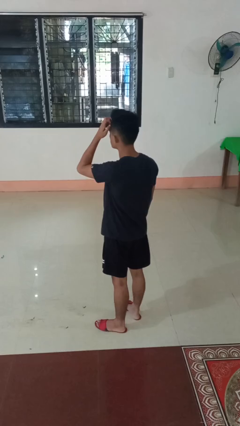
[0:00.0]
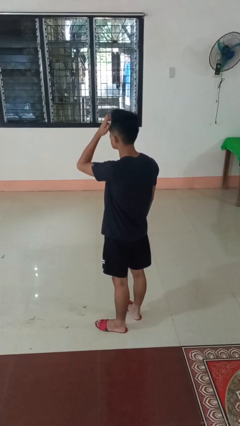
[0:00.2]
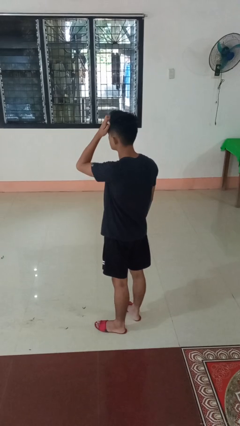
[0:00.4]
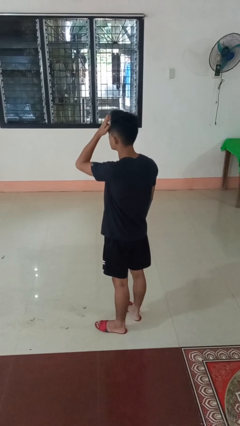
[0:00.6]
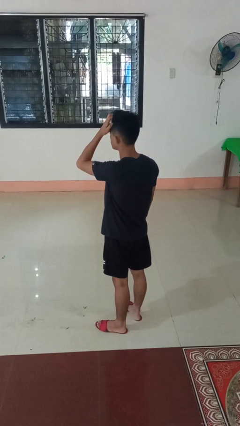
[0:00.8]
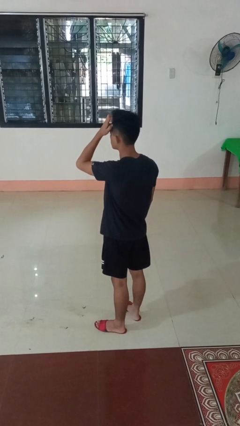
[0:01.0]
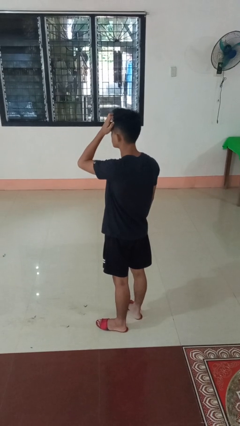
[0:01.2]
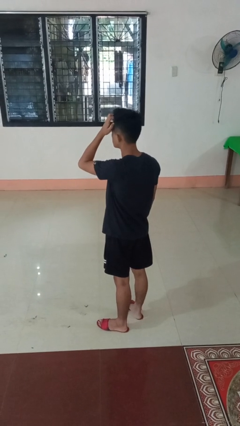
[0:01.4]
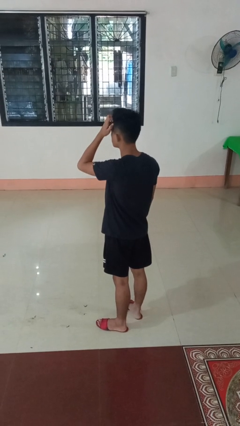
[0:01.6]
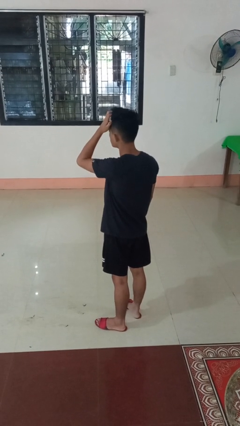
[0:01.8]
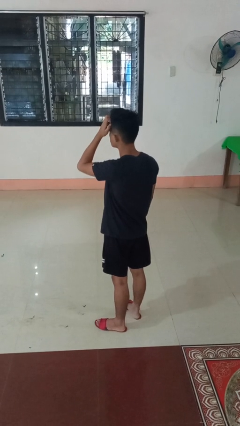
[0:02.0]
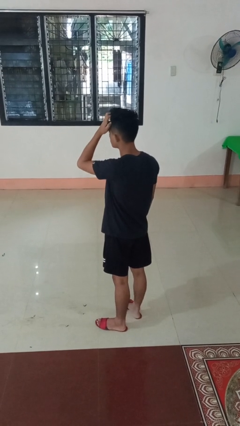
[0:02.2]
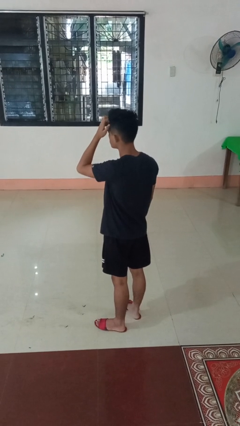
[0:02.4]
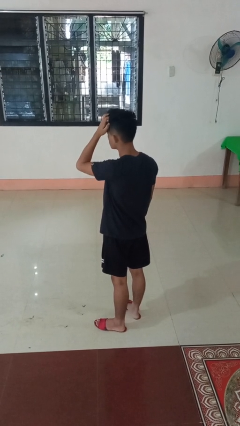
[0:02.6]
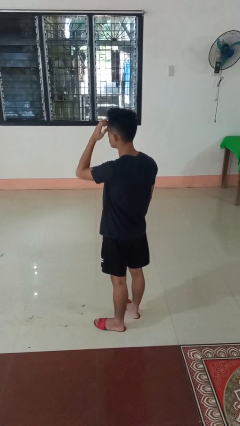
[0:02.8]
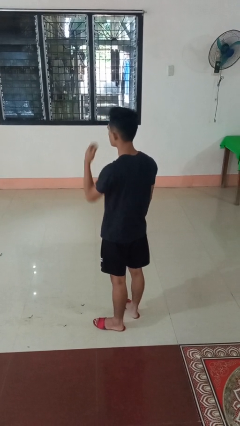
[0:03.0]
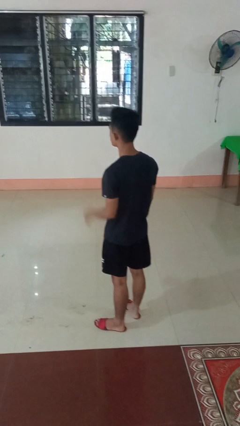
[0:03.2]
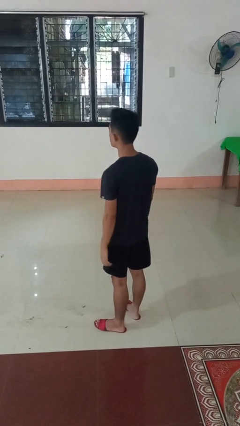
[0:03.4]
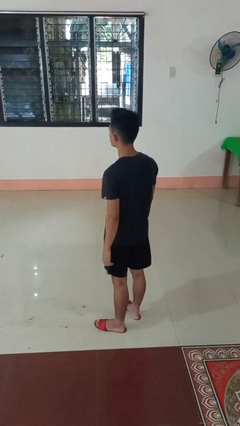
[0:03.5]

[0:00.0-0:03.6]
person scratches face

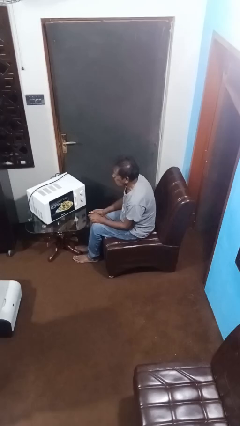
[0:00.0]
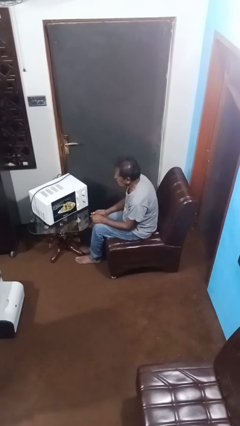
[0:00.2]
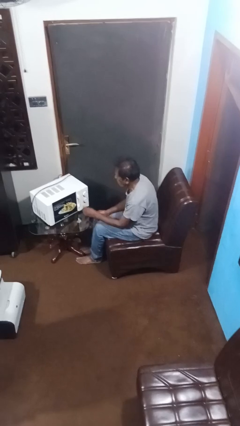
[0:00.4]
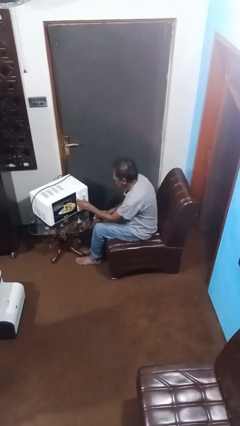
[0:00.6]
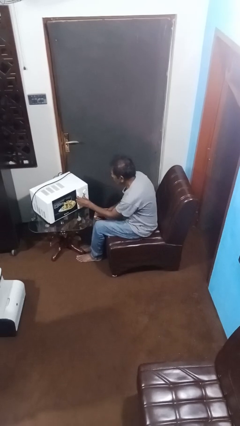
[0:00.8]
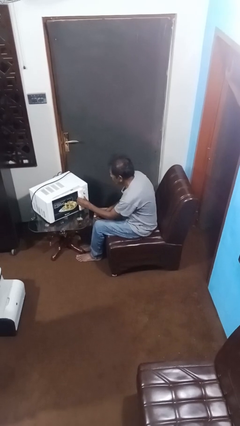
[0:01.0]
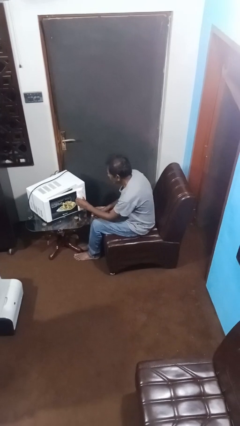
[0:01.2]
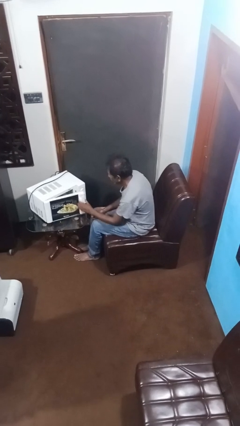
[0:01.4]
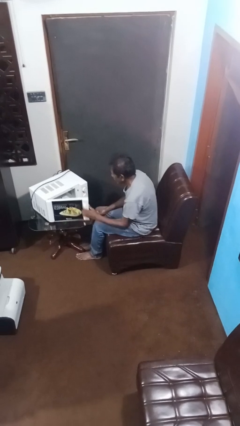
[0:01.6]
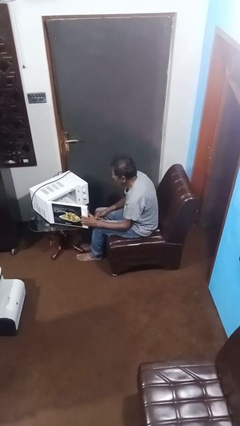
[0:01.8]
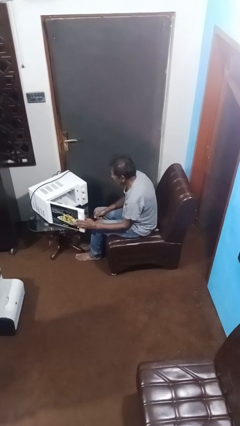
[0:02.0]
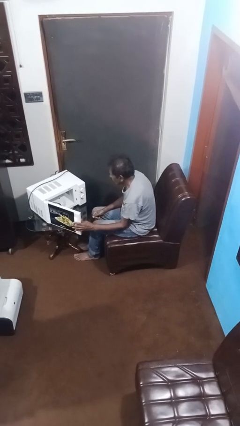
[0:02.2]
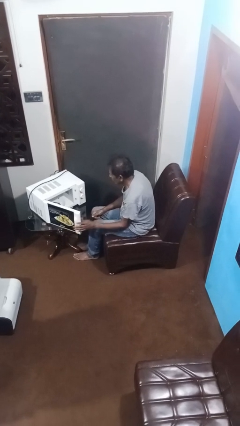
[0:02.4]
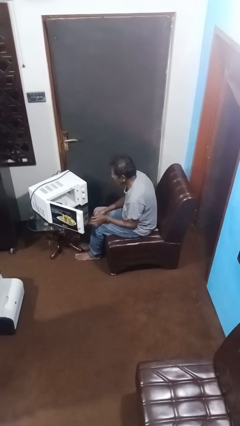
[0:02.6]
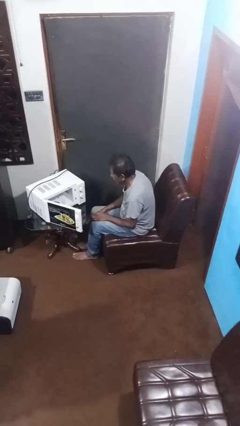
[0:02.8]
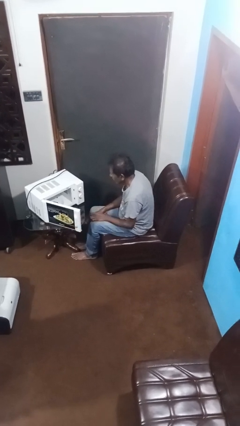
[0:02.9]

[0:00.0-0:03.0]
person opens microwave

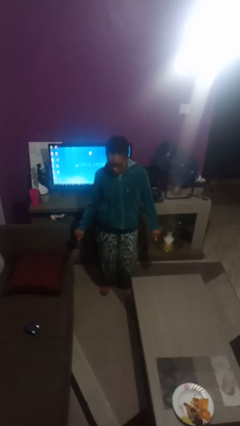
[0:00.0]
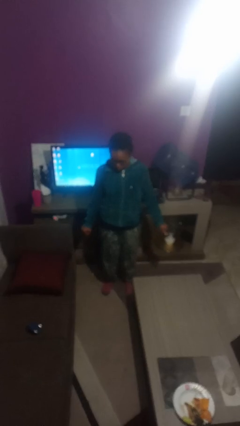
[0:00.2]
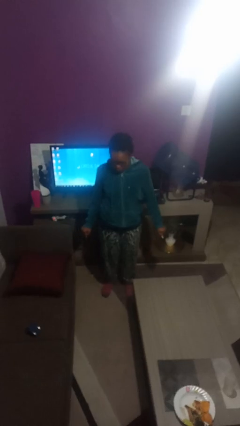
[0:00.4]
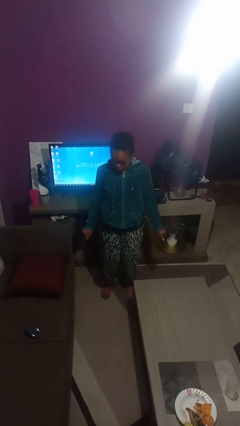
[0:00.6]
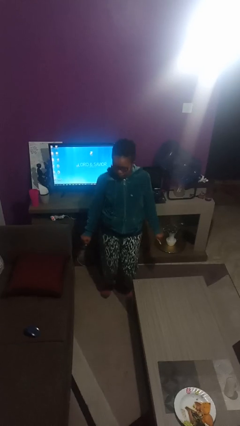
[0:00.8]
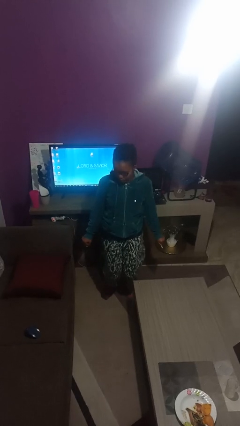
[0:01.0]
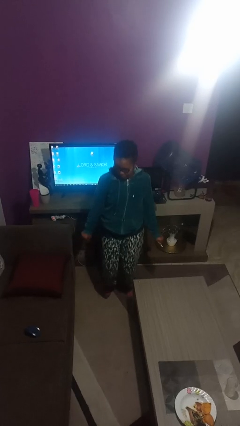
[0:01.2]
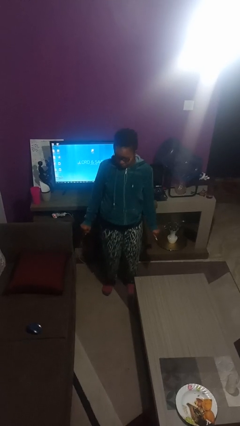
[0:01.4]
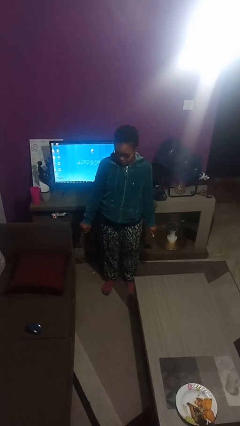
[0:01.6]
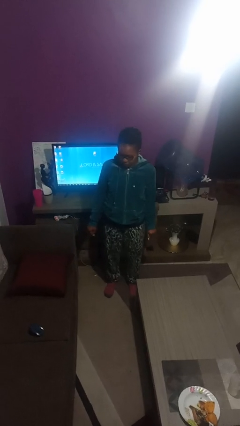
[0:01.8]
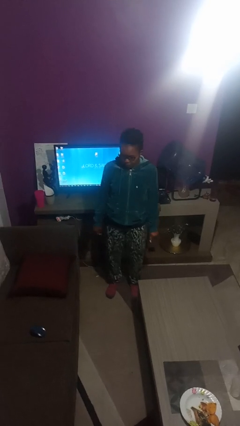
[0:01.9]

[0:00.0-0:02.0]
person dances in place

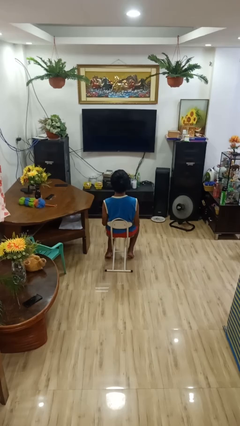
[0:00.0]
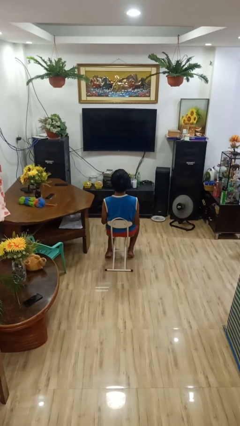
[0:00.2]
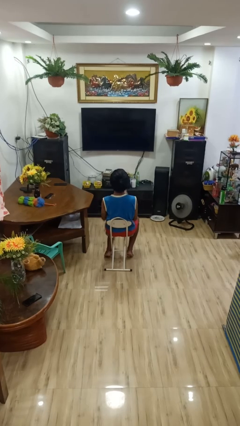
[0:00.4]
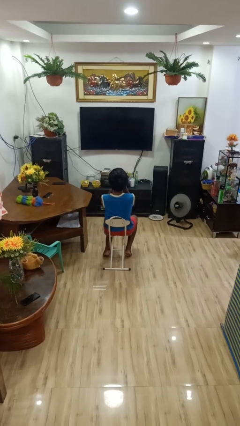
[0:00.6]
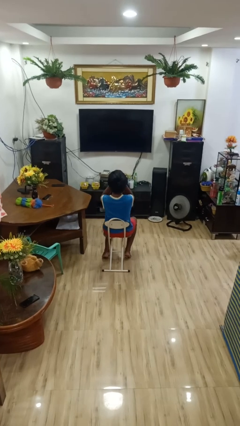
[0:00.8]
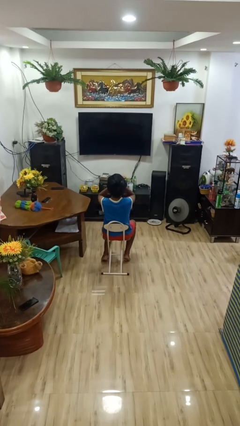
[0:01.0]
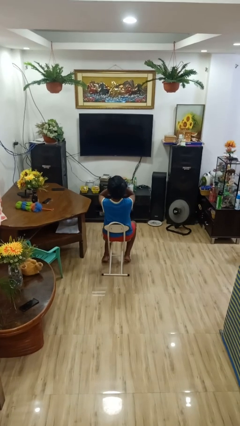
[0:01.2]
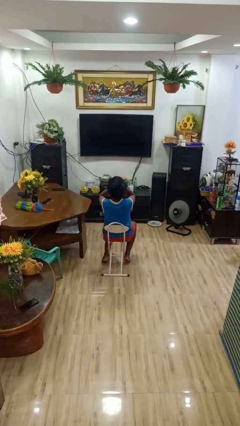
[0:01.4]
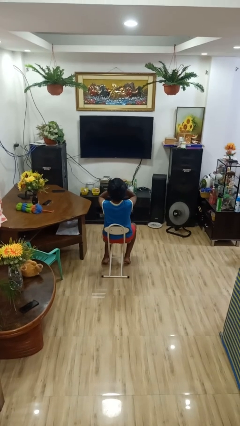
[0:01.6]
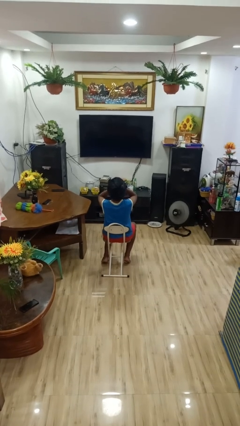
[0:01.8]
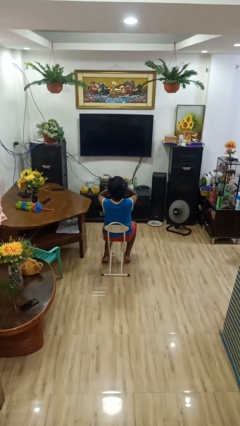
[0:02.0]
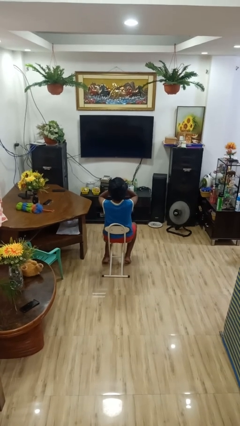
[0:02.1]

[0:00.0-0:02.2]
person covers face with hands

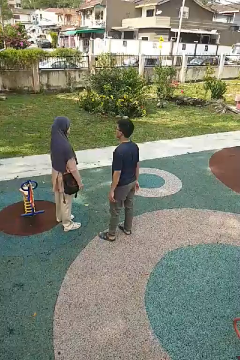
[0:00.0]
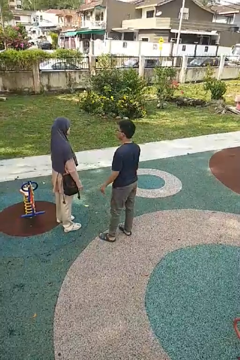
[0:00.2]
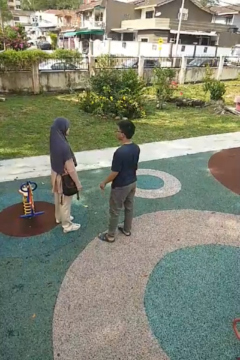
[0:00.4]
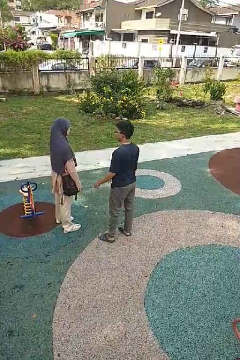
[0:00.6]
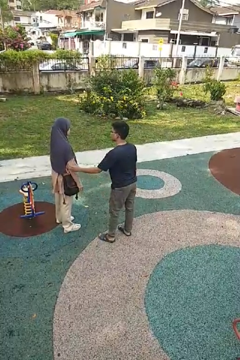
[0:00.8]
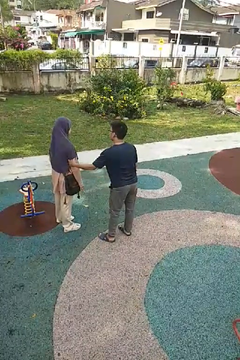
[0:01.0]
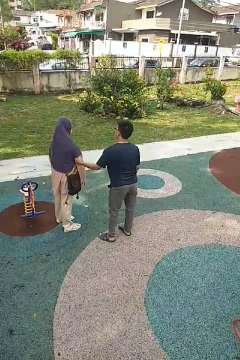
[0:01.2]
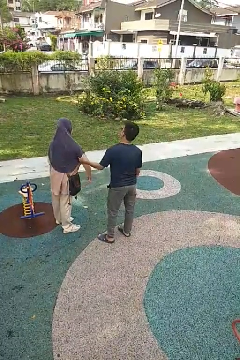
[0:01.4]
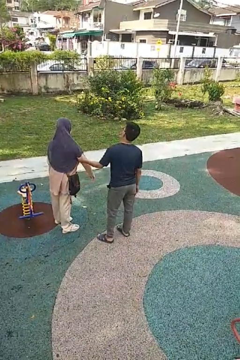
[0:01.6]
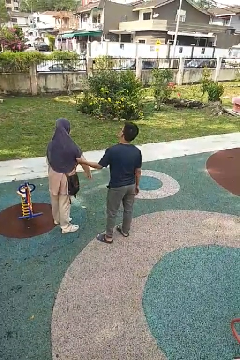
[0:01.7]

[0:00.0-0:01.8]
person grabs person by bicep

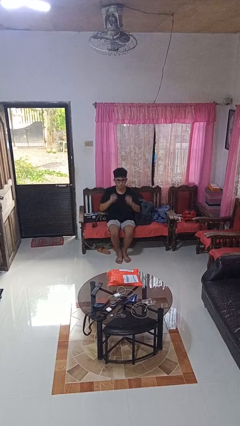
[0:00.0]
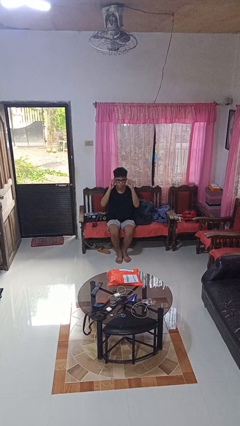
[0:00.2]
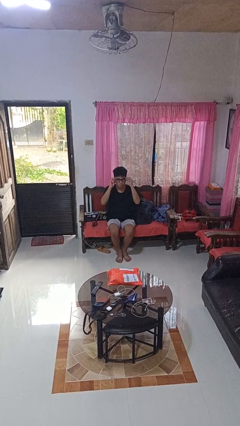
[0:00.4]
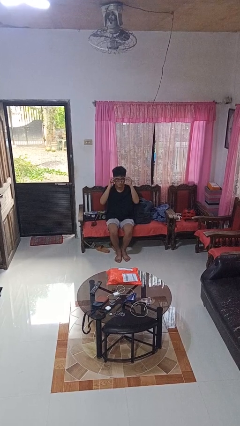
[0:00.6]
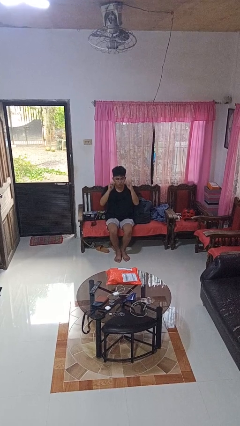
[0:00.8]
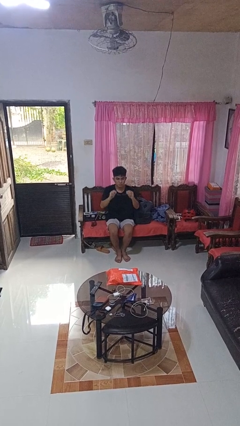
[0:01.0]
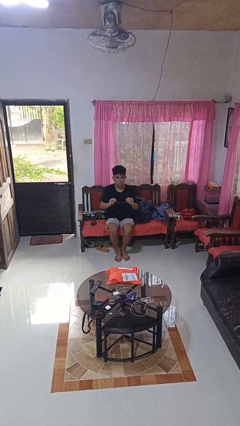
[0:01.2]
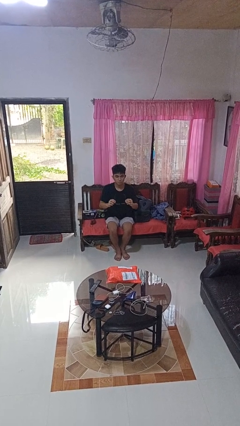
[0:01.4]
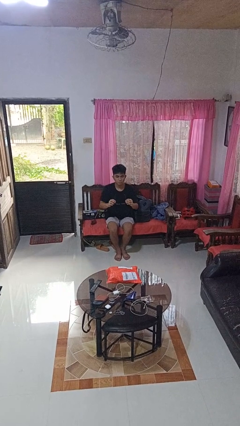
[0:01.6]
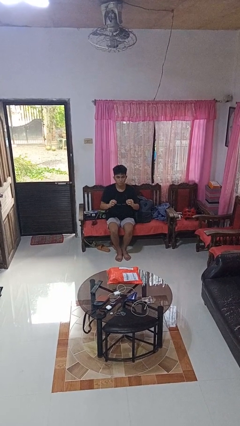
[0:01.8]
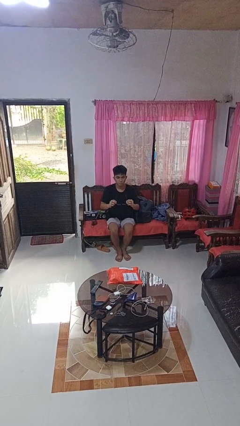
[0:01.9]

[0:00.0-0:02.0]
person takes off glasses

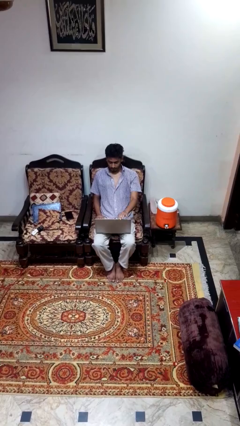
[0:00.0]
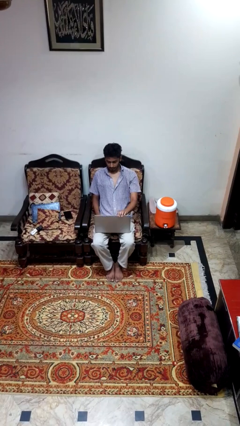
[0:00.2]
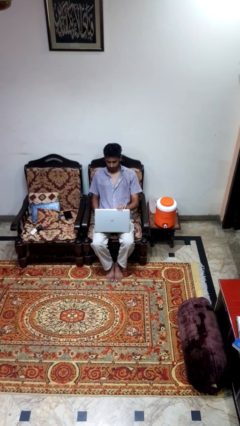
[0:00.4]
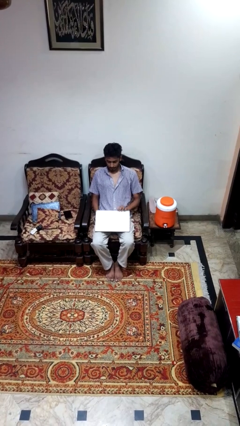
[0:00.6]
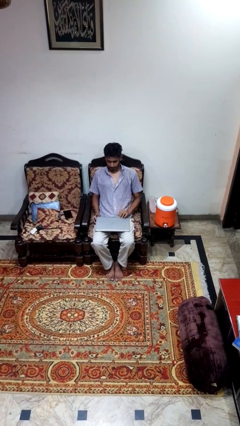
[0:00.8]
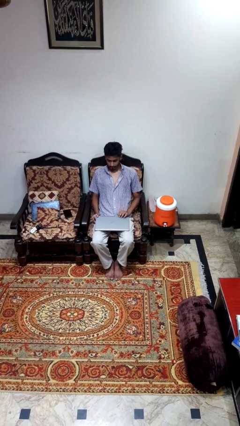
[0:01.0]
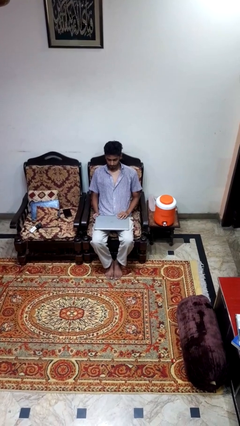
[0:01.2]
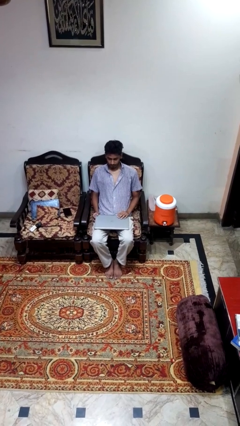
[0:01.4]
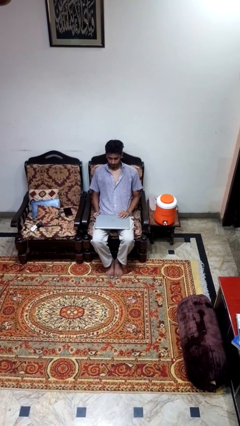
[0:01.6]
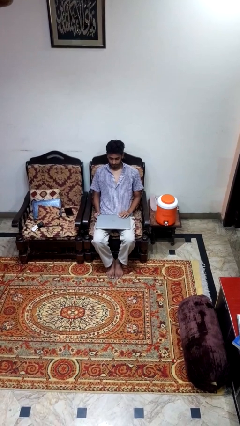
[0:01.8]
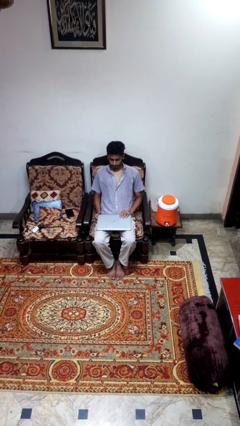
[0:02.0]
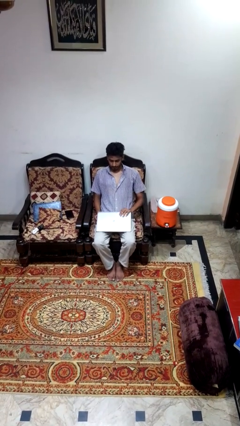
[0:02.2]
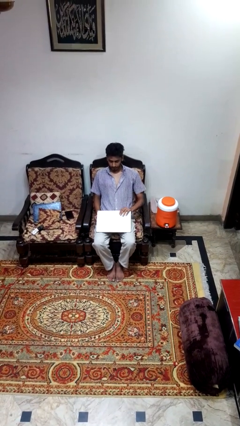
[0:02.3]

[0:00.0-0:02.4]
person closes laptop

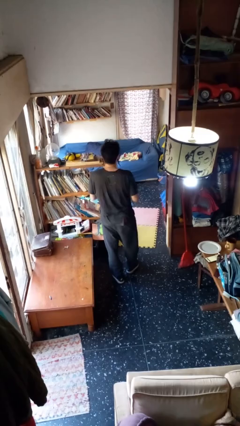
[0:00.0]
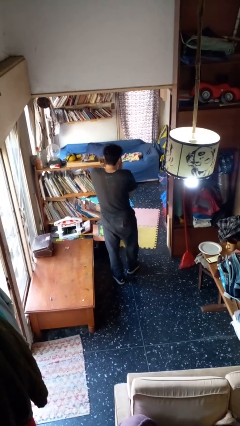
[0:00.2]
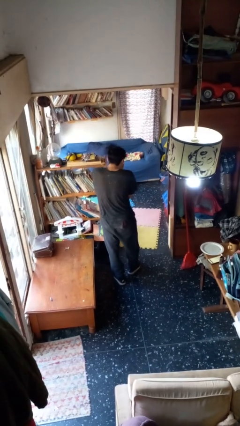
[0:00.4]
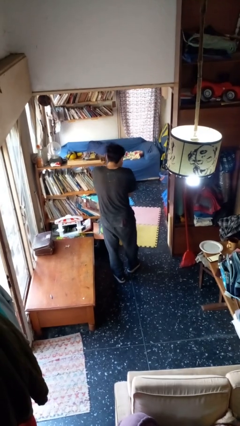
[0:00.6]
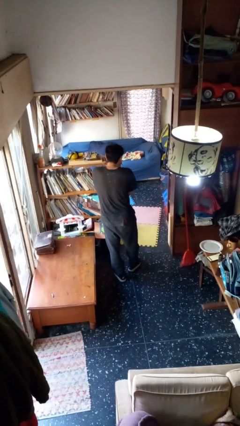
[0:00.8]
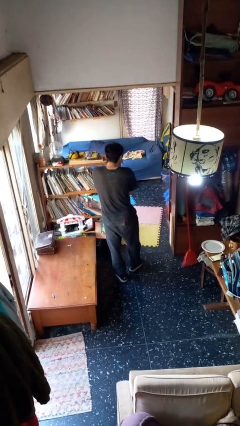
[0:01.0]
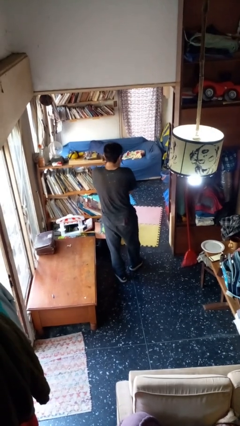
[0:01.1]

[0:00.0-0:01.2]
person sneezes into hand
